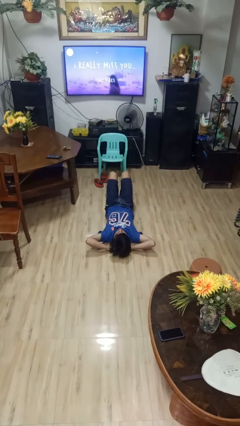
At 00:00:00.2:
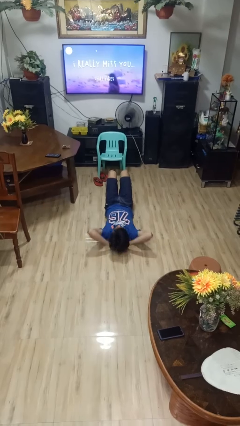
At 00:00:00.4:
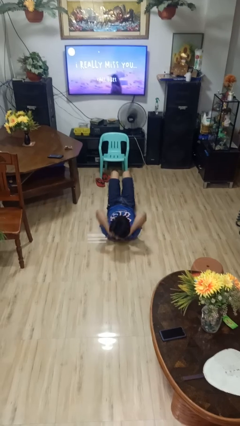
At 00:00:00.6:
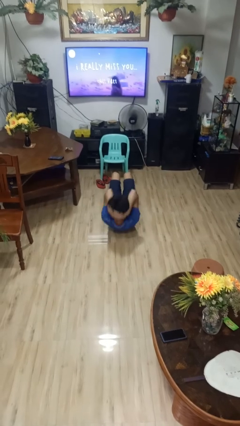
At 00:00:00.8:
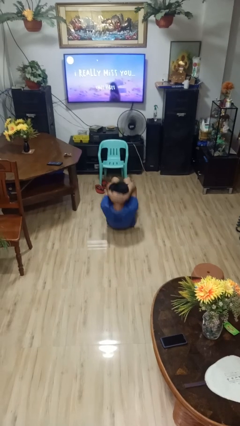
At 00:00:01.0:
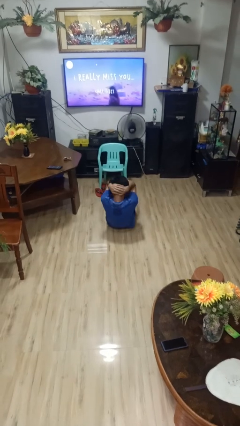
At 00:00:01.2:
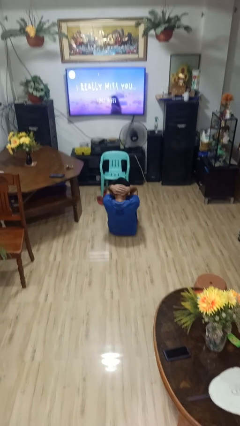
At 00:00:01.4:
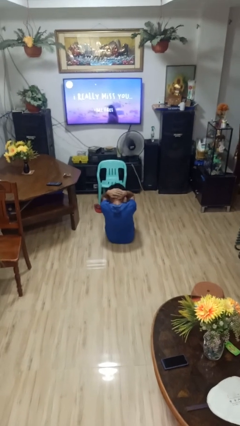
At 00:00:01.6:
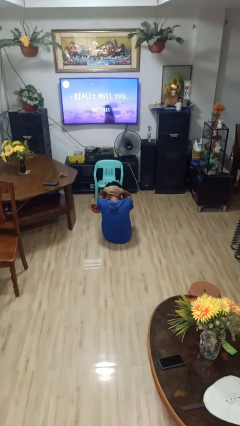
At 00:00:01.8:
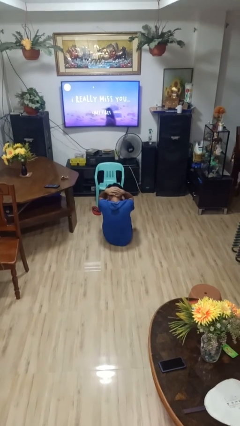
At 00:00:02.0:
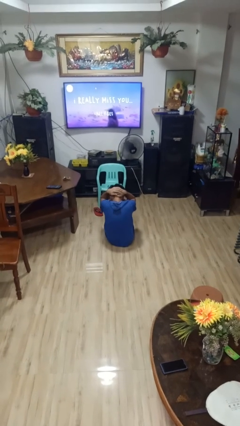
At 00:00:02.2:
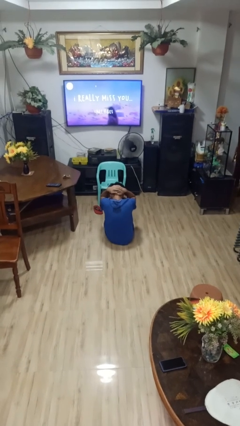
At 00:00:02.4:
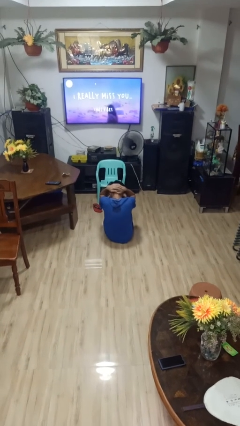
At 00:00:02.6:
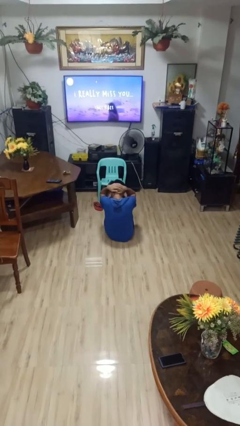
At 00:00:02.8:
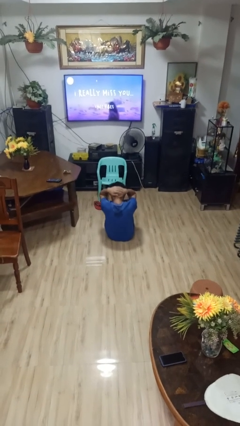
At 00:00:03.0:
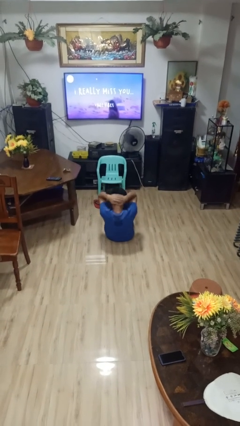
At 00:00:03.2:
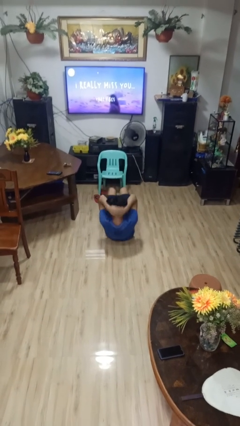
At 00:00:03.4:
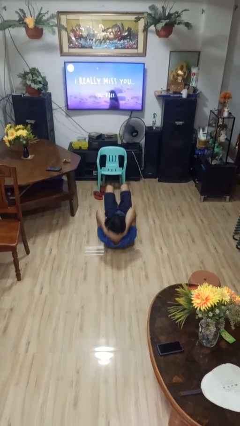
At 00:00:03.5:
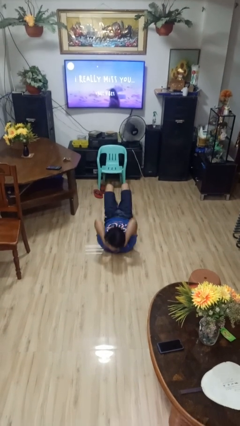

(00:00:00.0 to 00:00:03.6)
person drinks from bottle

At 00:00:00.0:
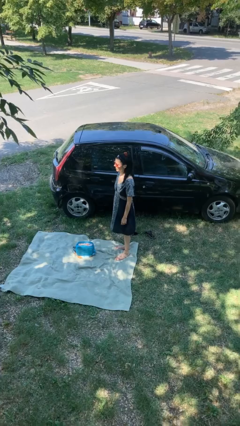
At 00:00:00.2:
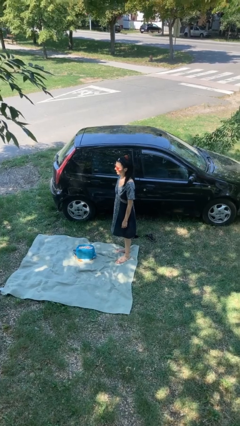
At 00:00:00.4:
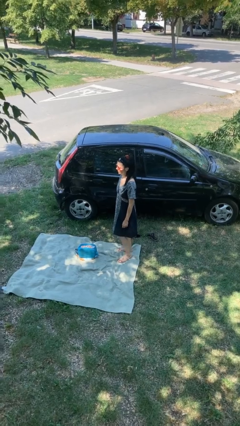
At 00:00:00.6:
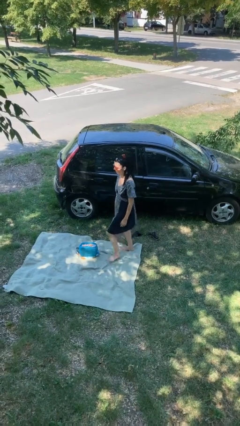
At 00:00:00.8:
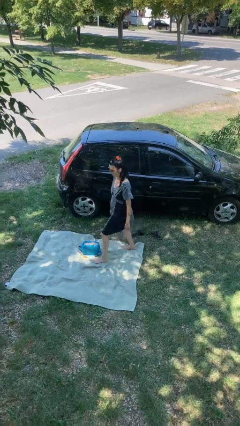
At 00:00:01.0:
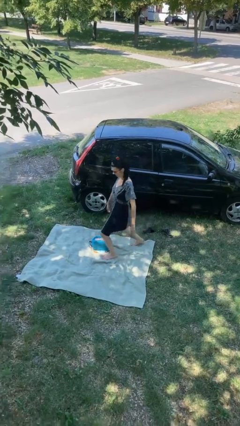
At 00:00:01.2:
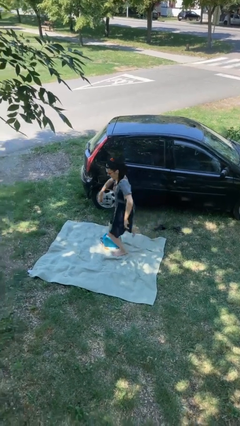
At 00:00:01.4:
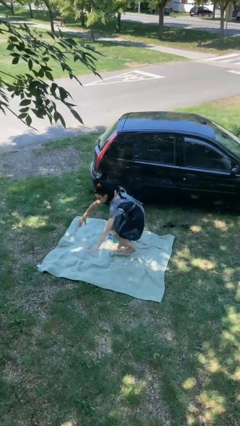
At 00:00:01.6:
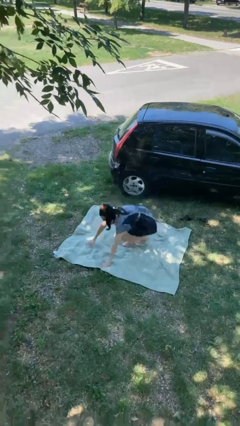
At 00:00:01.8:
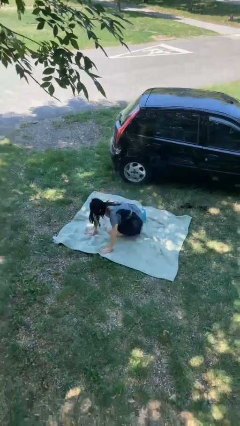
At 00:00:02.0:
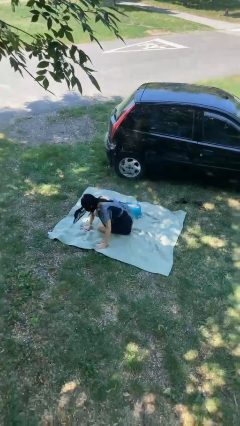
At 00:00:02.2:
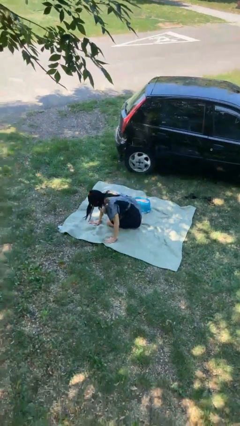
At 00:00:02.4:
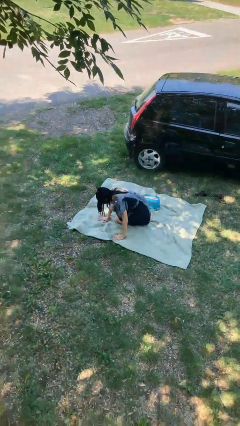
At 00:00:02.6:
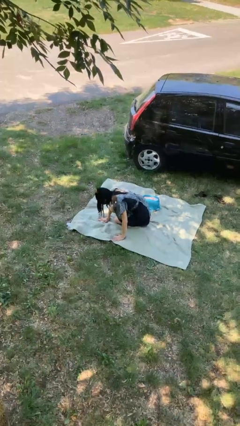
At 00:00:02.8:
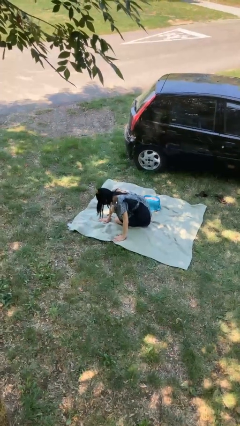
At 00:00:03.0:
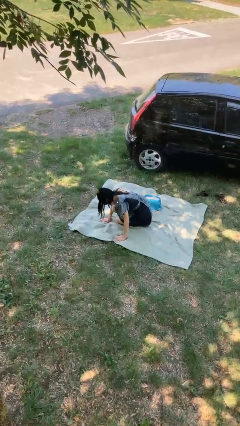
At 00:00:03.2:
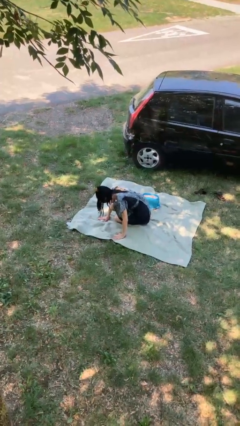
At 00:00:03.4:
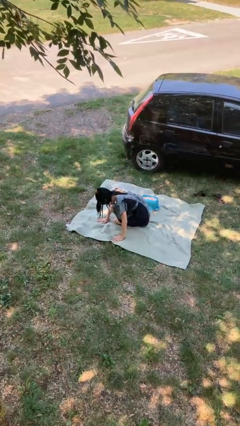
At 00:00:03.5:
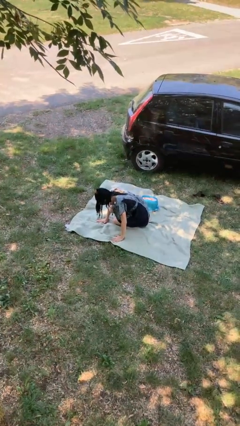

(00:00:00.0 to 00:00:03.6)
person trips on object on floor

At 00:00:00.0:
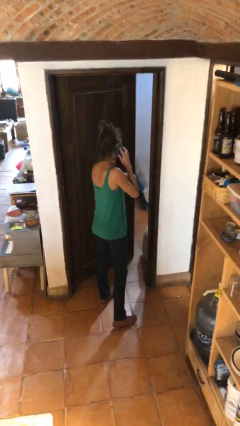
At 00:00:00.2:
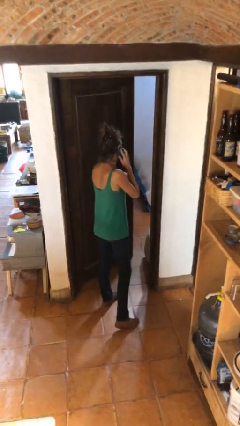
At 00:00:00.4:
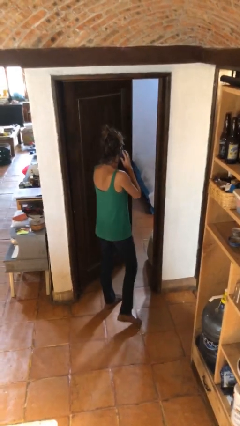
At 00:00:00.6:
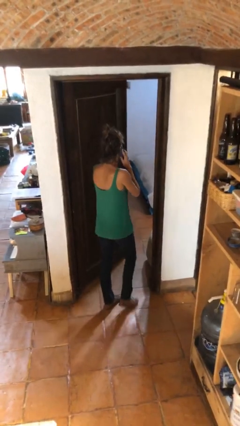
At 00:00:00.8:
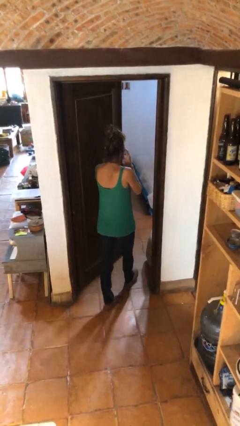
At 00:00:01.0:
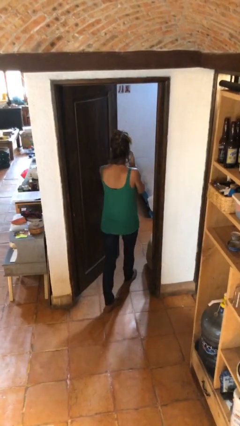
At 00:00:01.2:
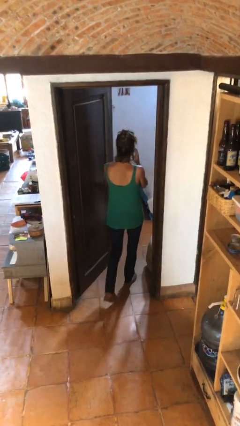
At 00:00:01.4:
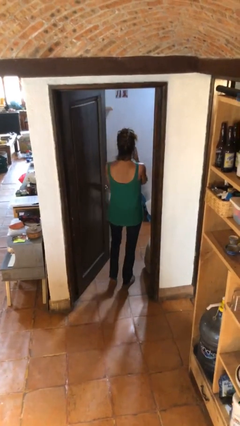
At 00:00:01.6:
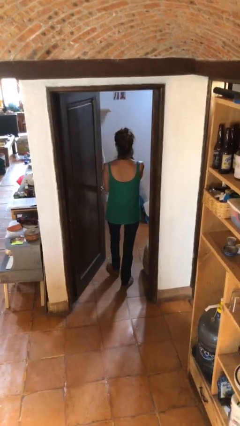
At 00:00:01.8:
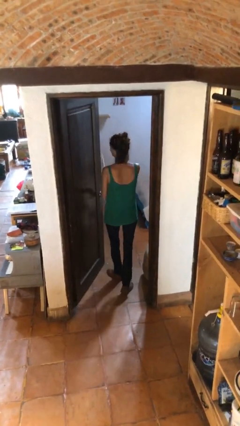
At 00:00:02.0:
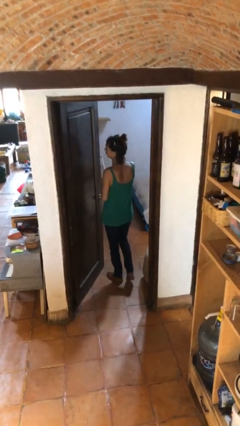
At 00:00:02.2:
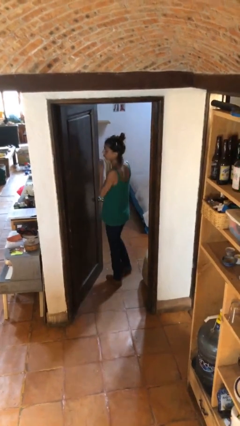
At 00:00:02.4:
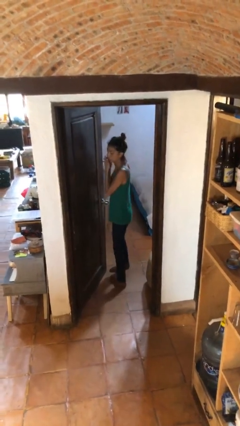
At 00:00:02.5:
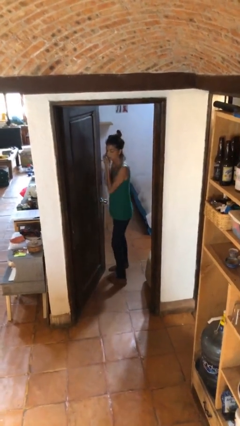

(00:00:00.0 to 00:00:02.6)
person exits scene through structure

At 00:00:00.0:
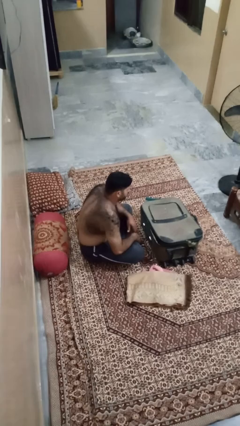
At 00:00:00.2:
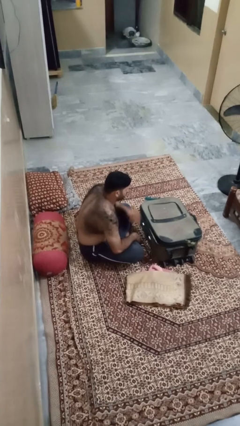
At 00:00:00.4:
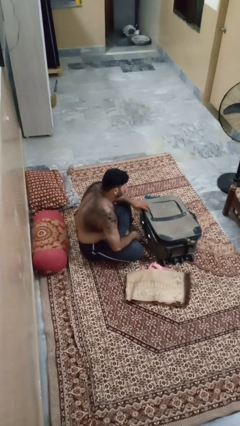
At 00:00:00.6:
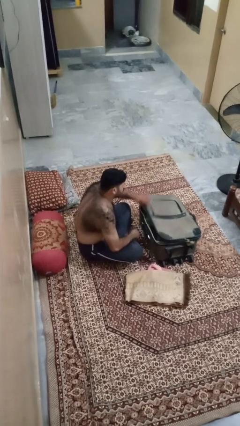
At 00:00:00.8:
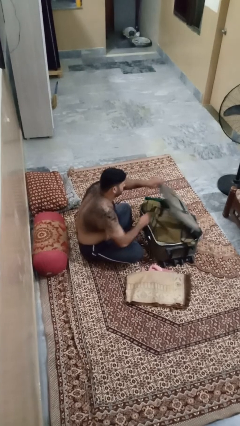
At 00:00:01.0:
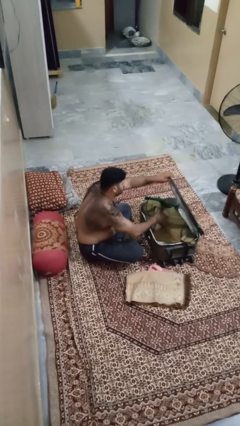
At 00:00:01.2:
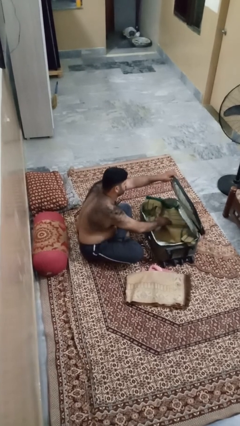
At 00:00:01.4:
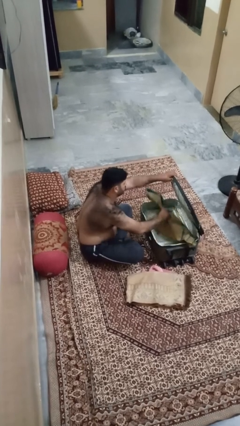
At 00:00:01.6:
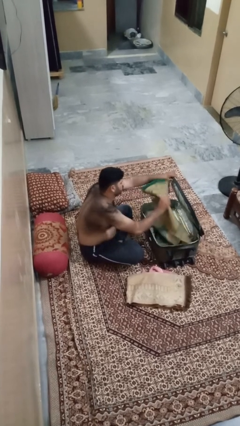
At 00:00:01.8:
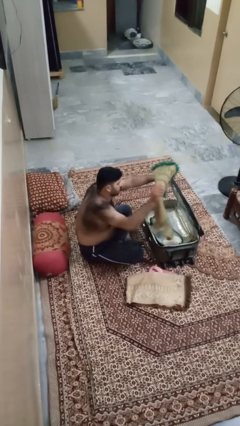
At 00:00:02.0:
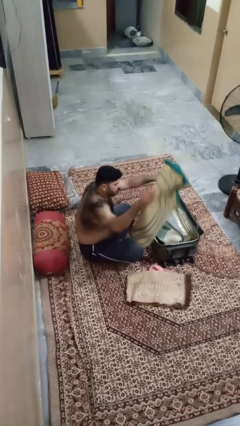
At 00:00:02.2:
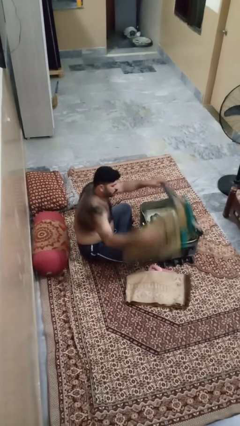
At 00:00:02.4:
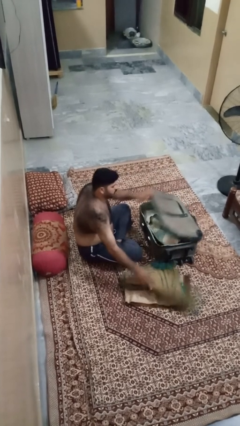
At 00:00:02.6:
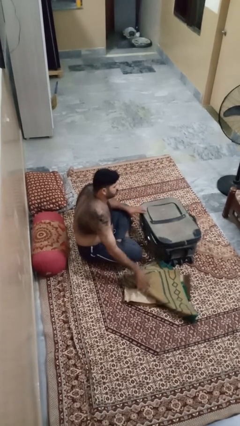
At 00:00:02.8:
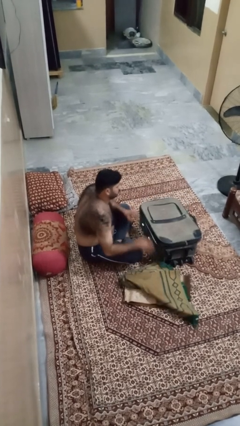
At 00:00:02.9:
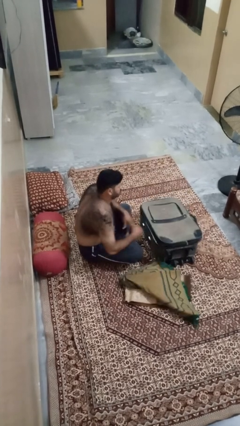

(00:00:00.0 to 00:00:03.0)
person unloads clothes from suitcase

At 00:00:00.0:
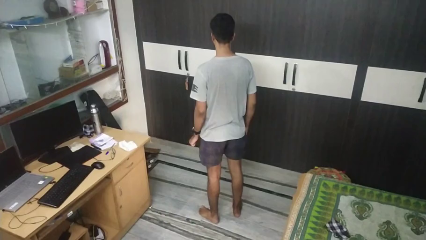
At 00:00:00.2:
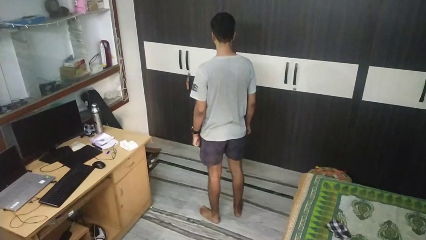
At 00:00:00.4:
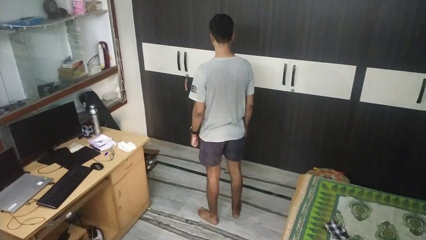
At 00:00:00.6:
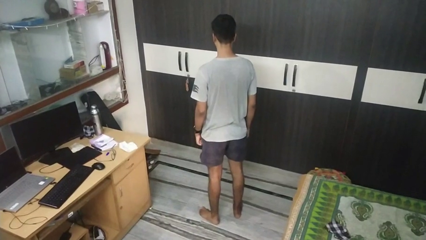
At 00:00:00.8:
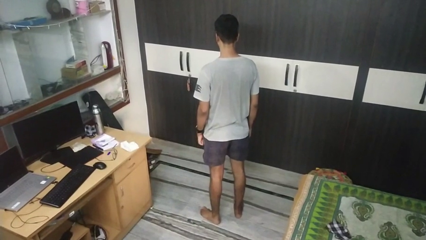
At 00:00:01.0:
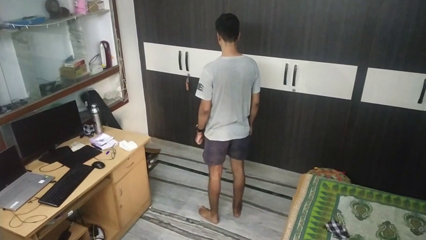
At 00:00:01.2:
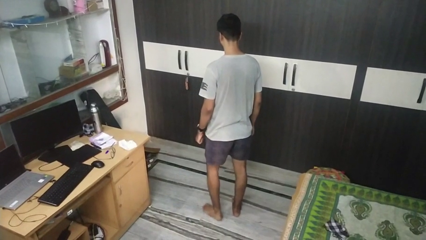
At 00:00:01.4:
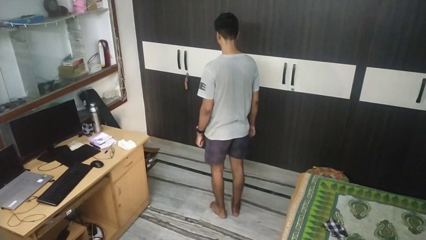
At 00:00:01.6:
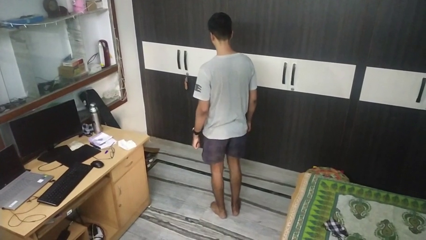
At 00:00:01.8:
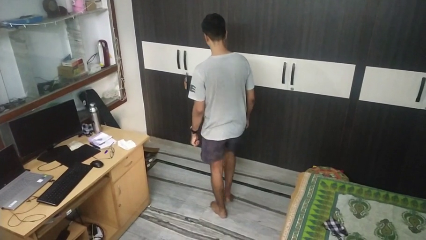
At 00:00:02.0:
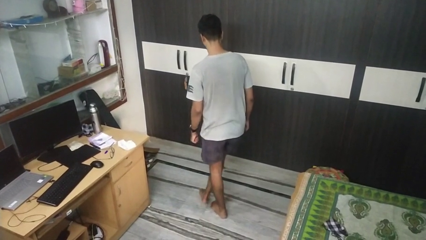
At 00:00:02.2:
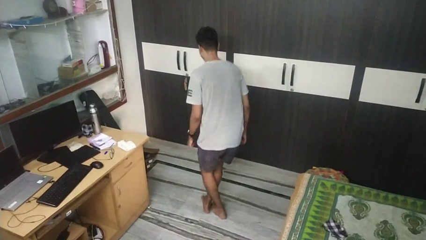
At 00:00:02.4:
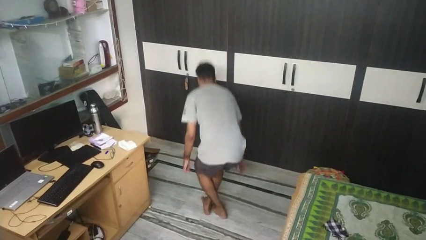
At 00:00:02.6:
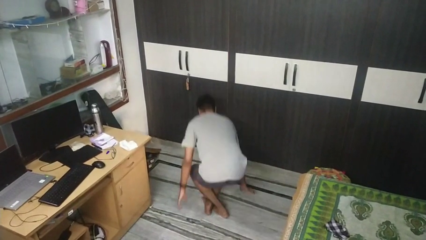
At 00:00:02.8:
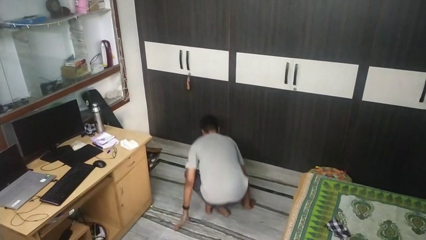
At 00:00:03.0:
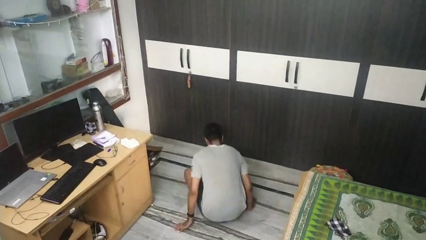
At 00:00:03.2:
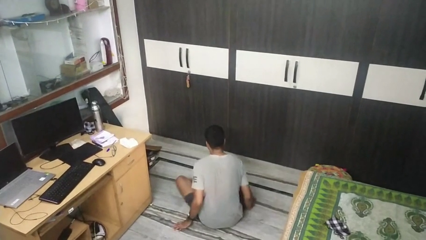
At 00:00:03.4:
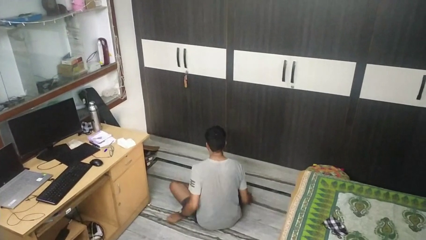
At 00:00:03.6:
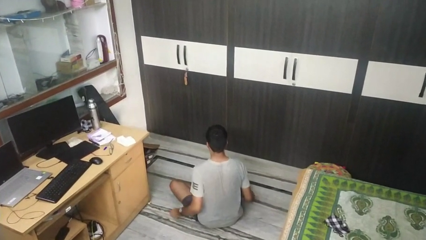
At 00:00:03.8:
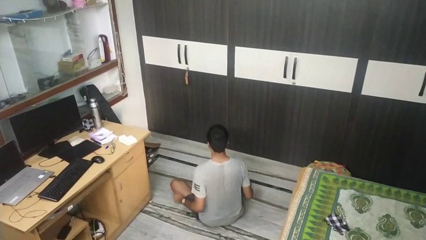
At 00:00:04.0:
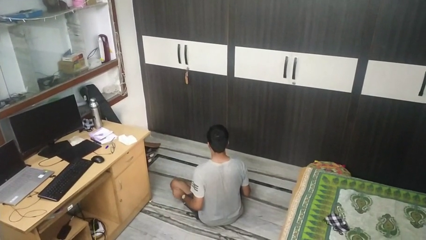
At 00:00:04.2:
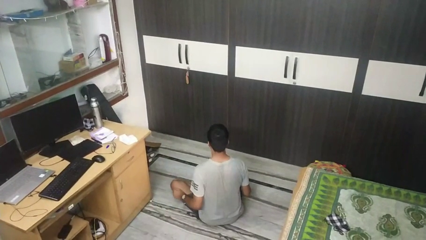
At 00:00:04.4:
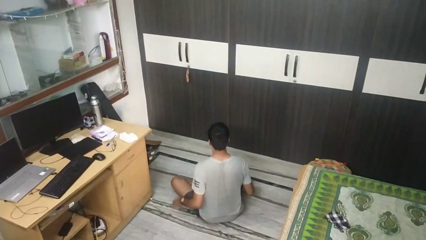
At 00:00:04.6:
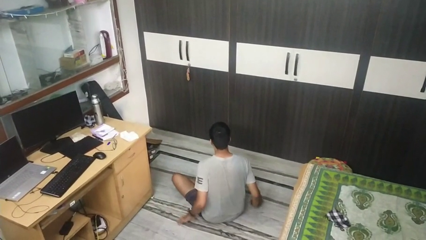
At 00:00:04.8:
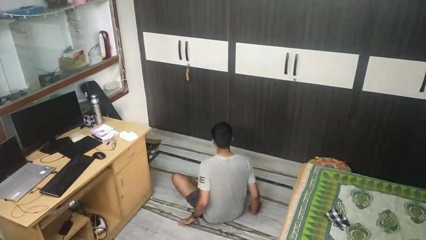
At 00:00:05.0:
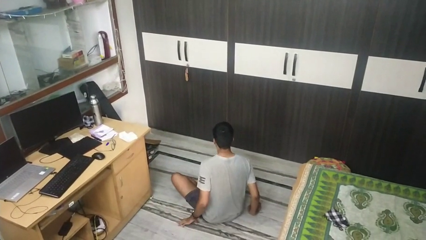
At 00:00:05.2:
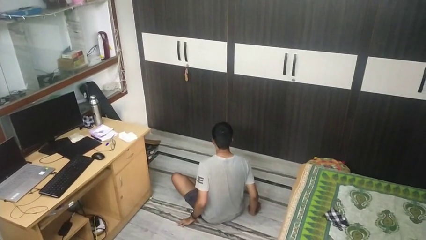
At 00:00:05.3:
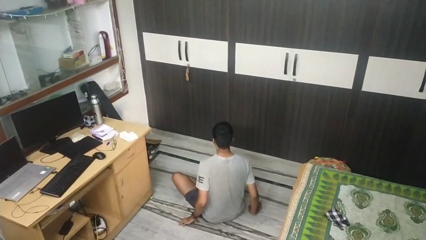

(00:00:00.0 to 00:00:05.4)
person sits crisscross
